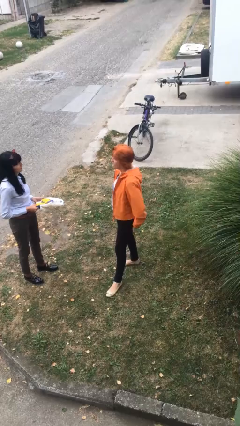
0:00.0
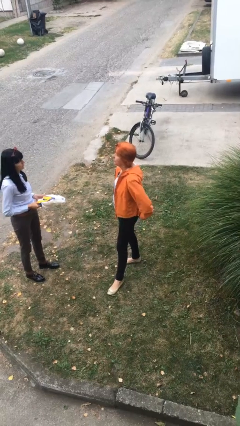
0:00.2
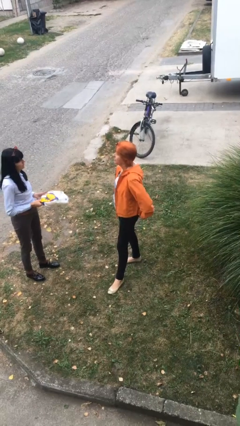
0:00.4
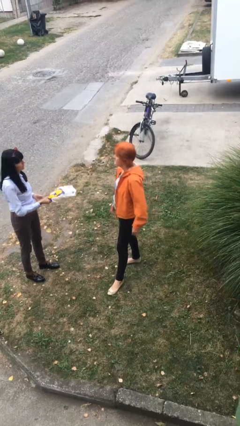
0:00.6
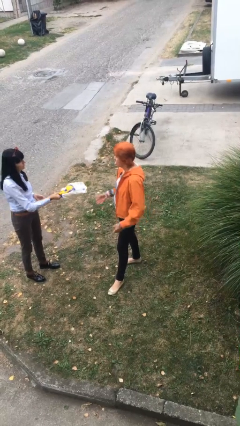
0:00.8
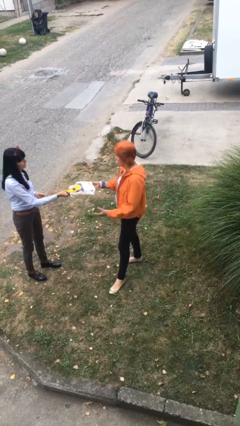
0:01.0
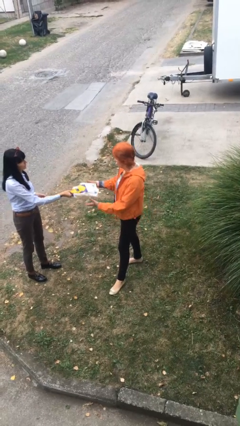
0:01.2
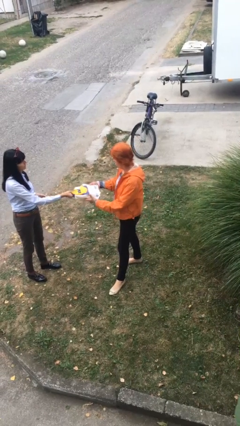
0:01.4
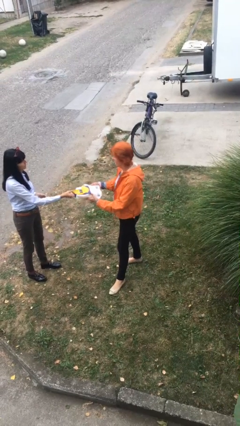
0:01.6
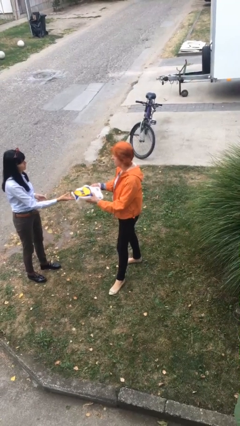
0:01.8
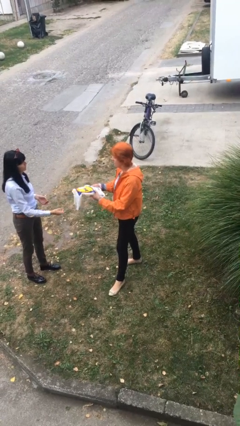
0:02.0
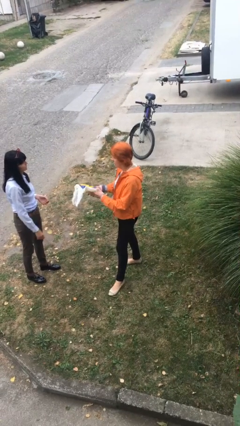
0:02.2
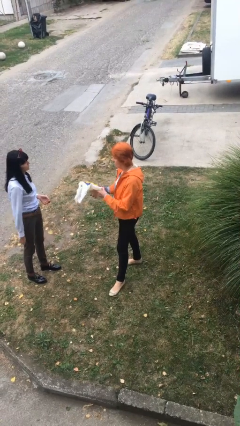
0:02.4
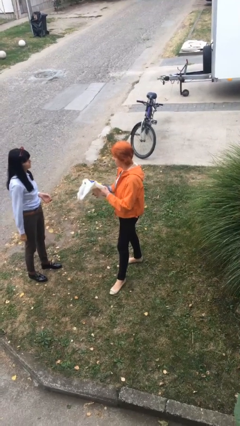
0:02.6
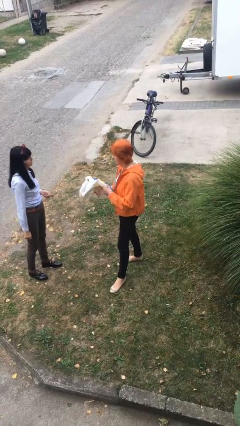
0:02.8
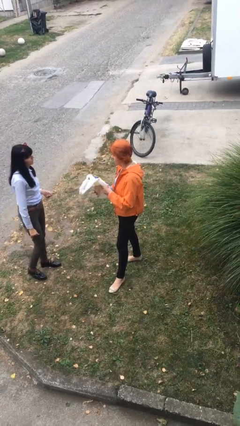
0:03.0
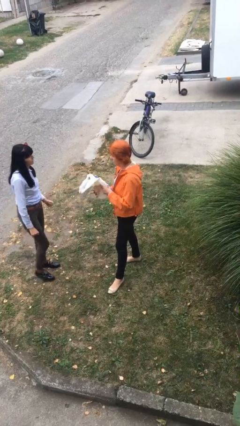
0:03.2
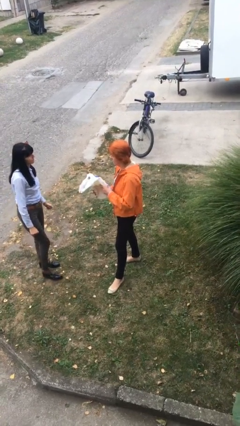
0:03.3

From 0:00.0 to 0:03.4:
person transfers object to person

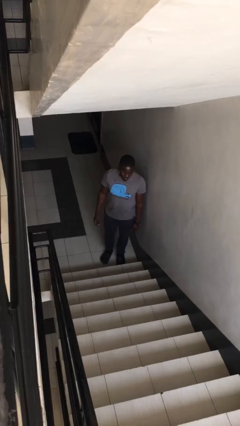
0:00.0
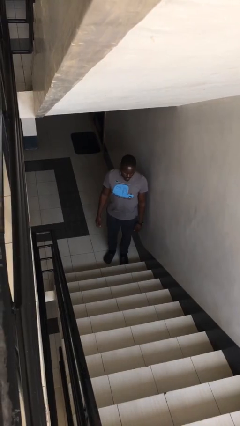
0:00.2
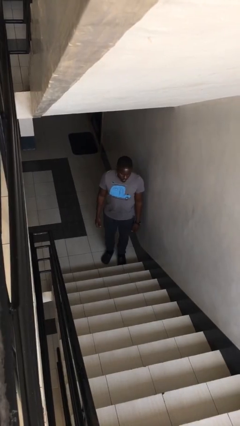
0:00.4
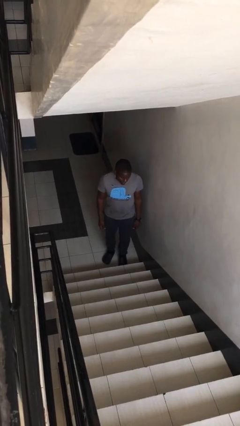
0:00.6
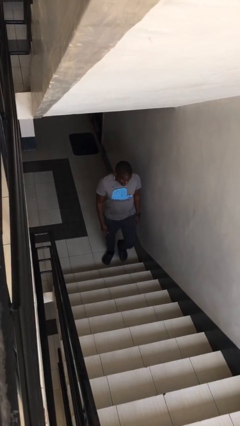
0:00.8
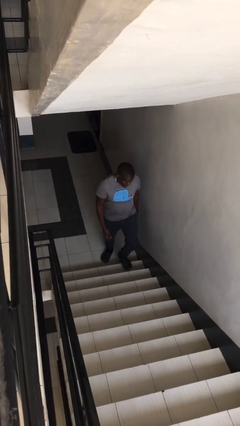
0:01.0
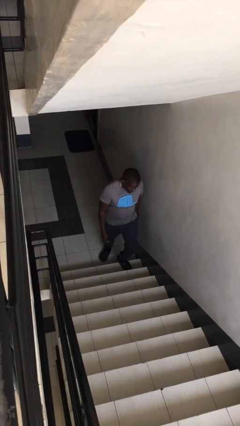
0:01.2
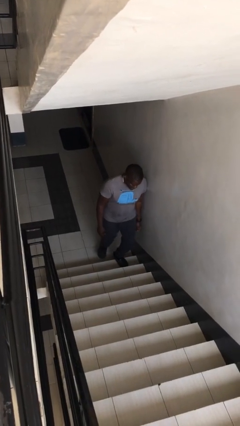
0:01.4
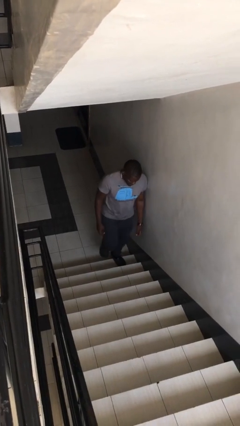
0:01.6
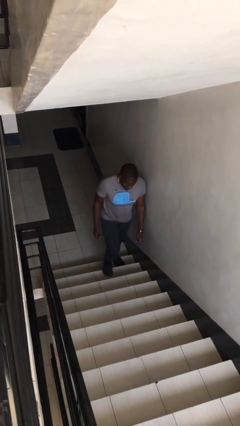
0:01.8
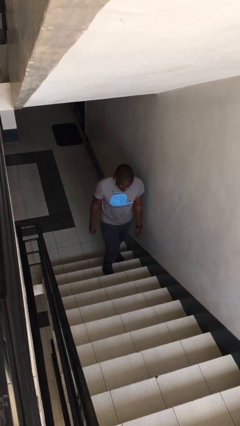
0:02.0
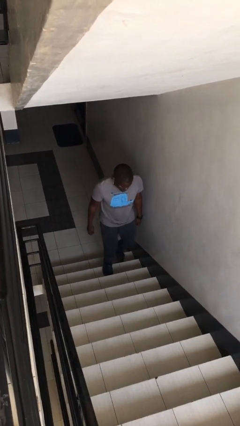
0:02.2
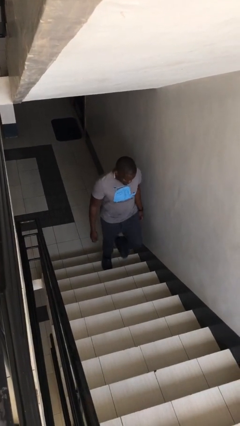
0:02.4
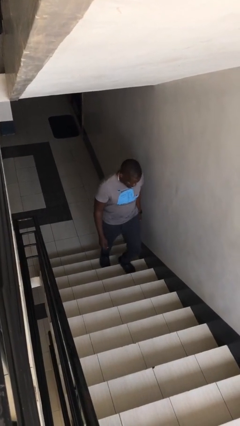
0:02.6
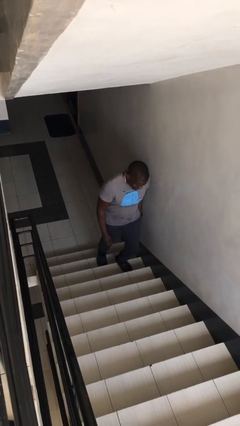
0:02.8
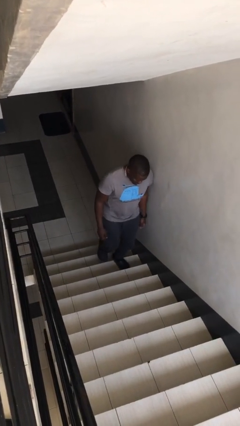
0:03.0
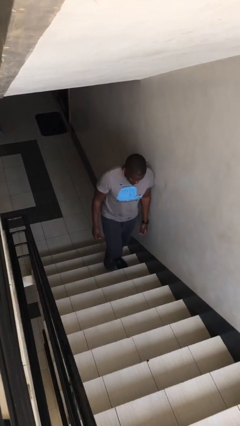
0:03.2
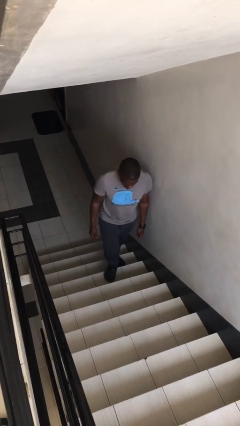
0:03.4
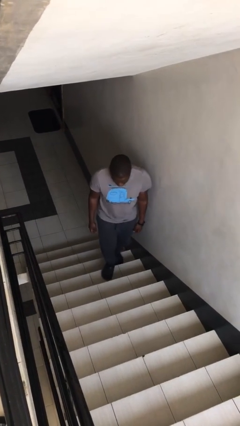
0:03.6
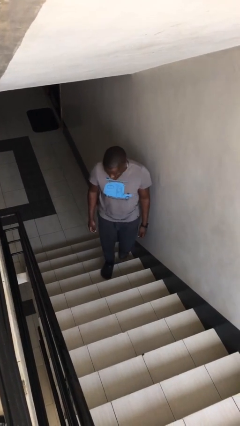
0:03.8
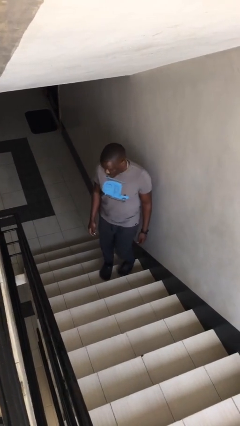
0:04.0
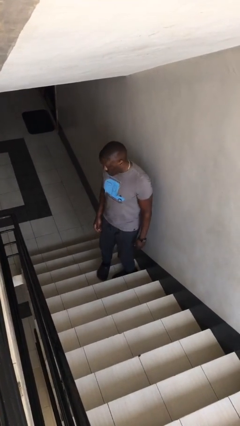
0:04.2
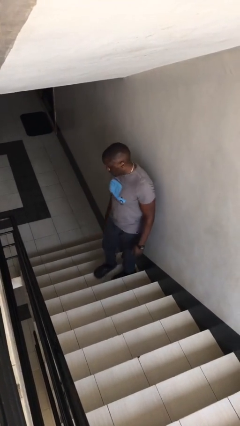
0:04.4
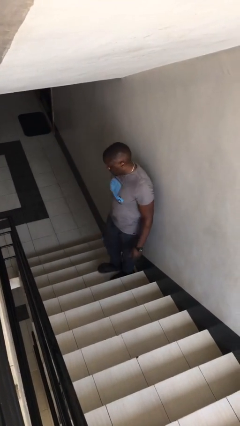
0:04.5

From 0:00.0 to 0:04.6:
person climbs up stairs

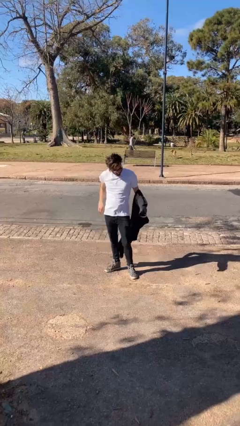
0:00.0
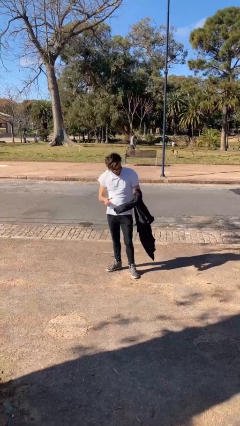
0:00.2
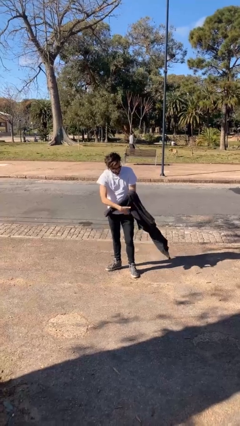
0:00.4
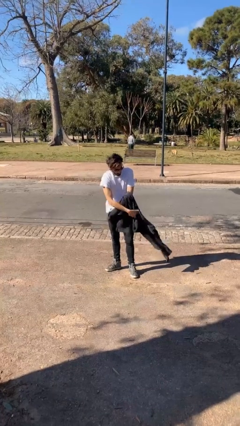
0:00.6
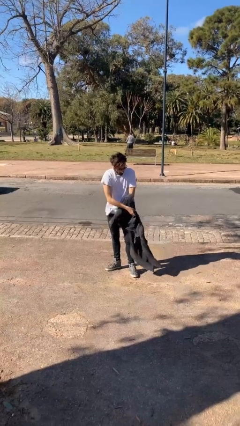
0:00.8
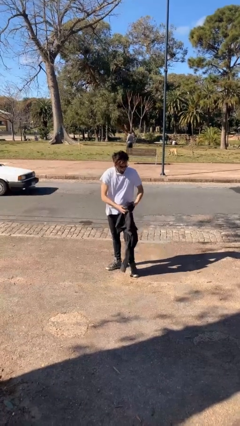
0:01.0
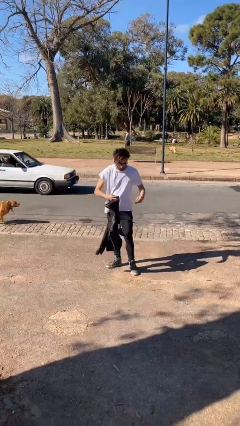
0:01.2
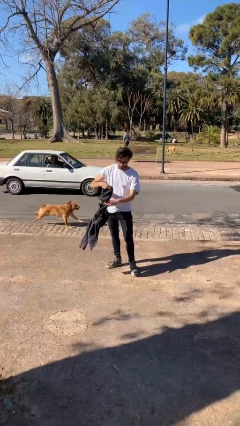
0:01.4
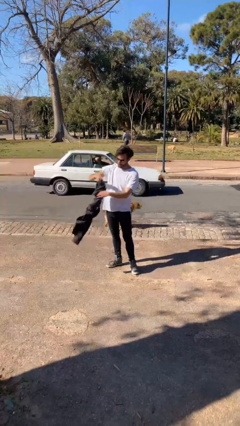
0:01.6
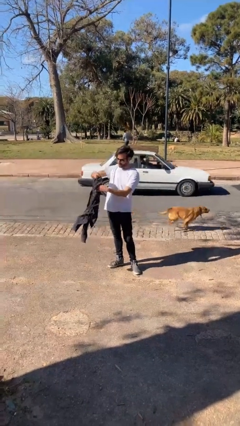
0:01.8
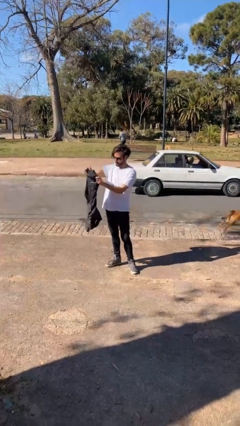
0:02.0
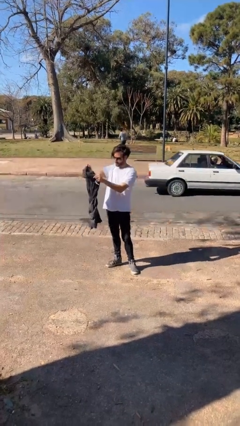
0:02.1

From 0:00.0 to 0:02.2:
person takes off jacket

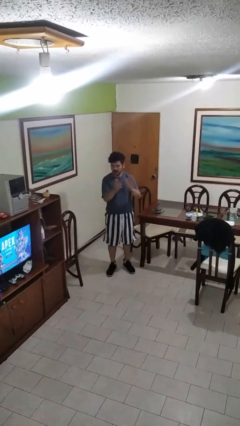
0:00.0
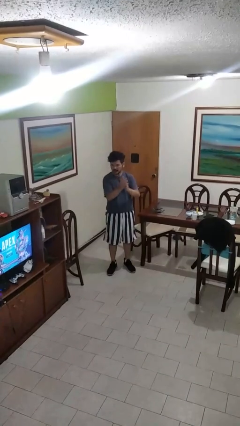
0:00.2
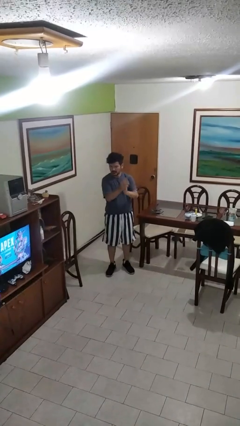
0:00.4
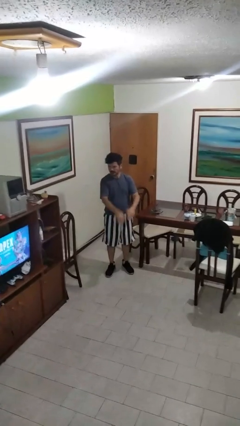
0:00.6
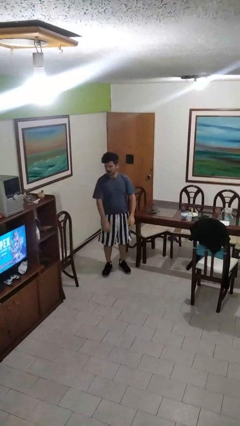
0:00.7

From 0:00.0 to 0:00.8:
person claps hands

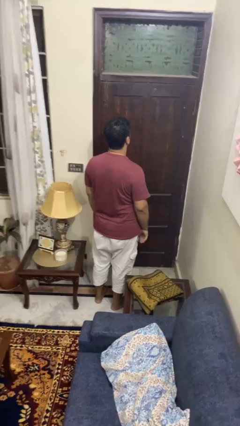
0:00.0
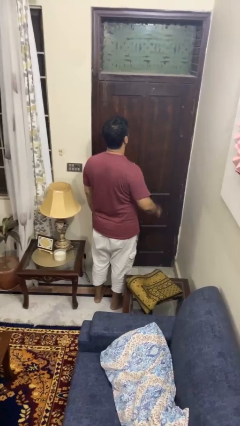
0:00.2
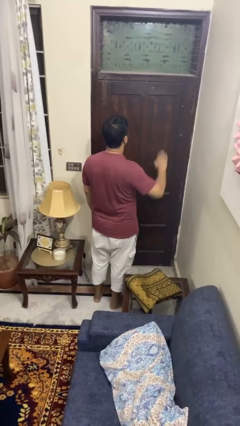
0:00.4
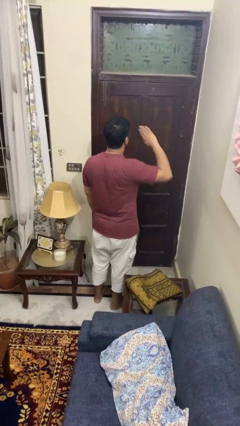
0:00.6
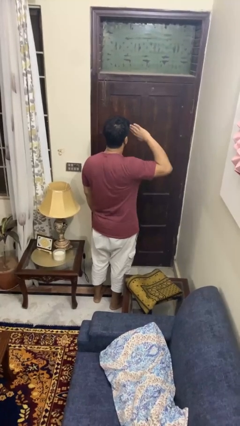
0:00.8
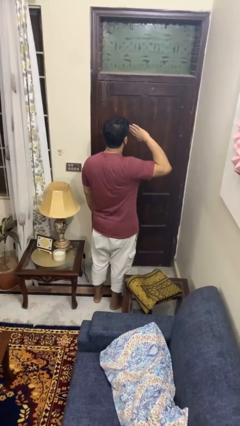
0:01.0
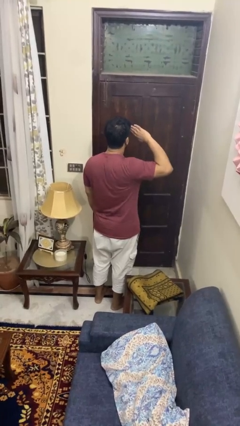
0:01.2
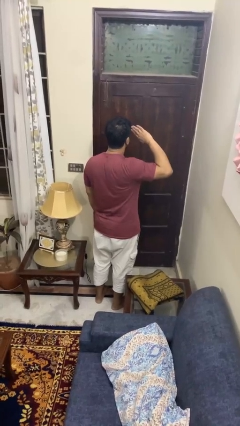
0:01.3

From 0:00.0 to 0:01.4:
person salutes

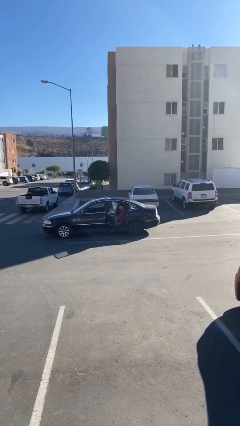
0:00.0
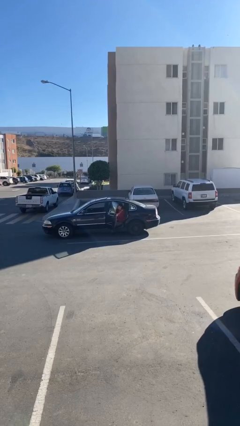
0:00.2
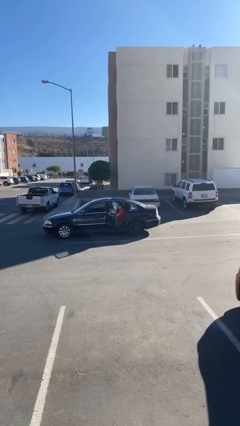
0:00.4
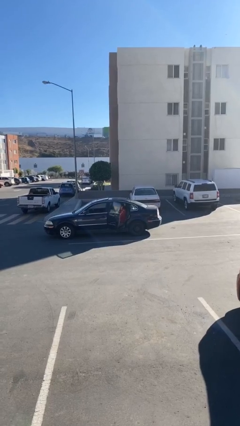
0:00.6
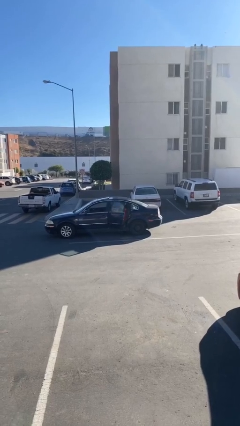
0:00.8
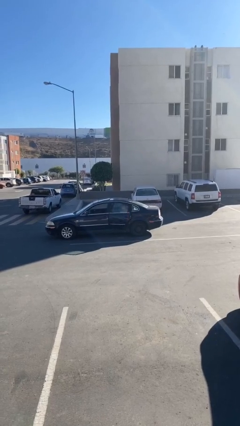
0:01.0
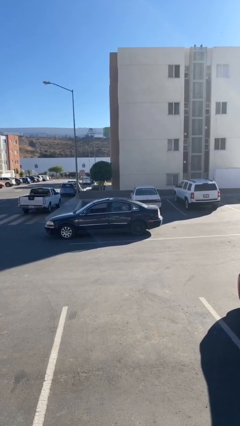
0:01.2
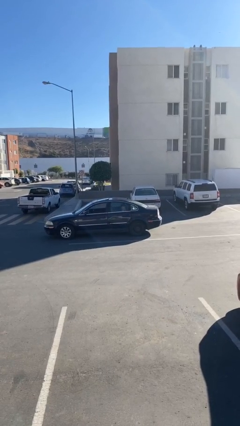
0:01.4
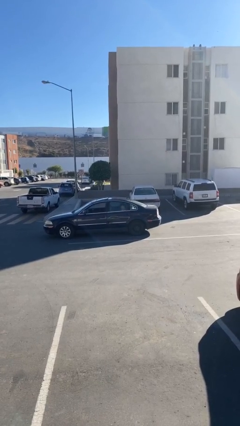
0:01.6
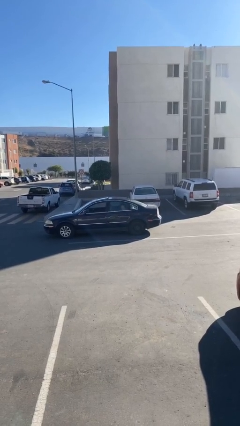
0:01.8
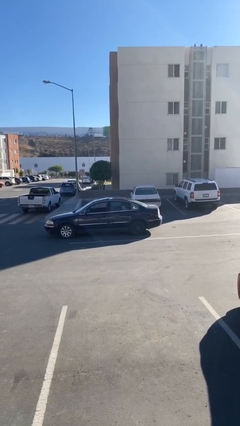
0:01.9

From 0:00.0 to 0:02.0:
person closes car door

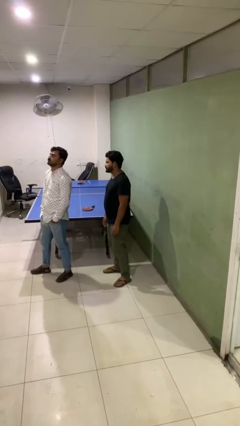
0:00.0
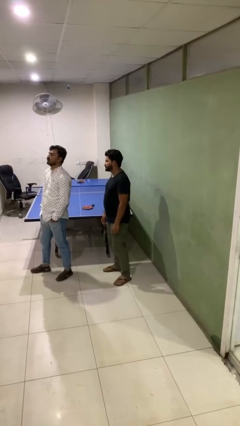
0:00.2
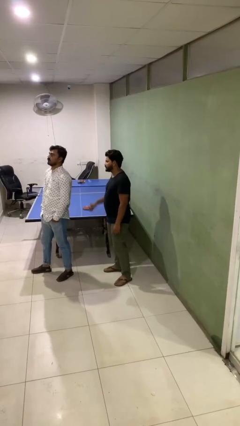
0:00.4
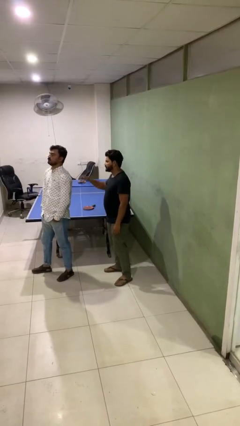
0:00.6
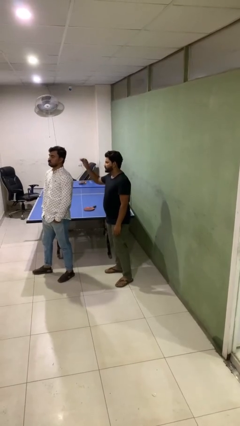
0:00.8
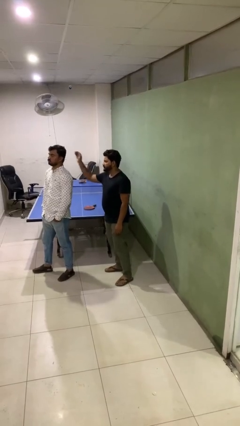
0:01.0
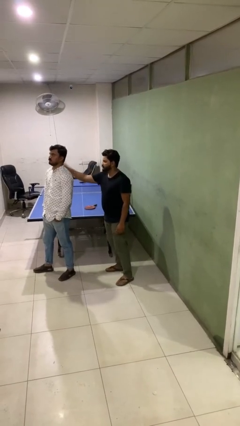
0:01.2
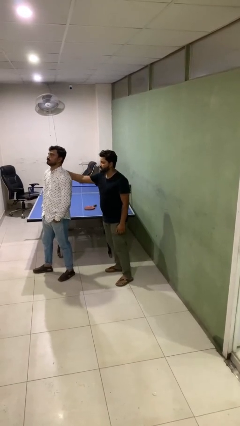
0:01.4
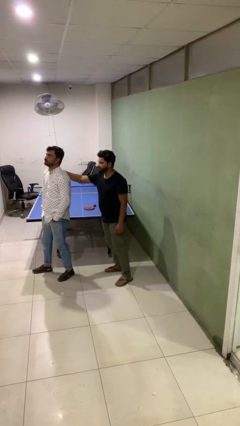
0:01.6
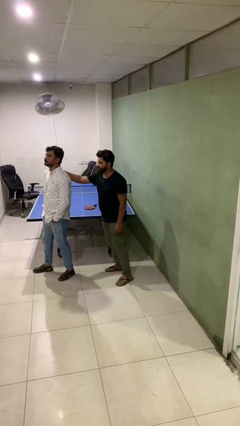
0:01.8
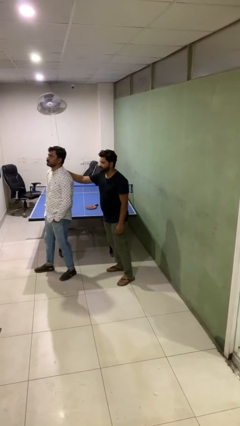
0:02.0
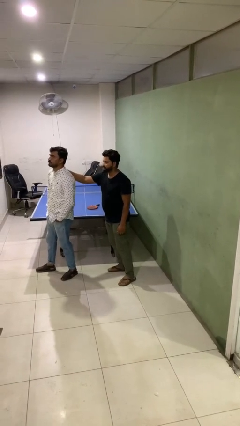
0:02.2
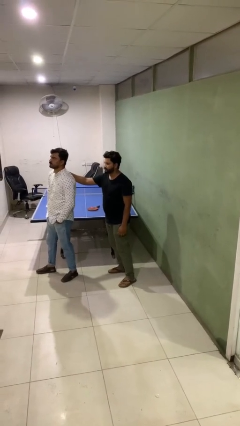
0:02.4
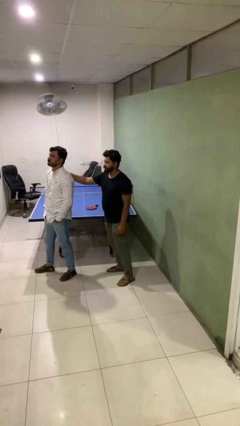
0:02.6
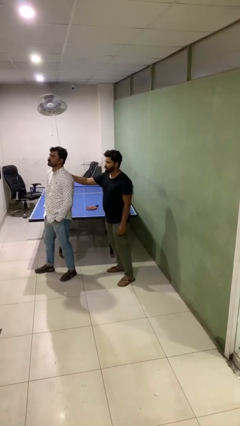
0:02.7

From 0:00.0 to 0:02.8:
person touches back of person

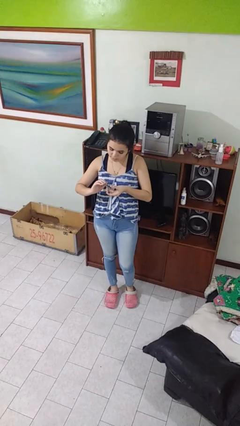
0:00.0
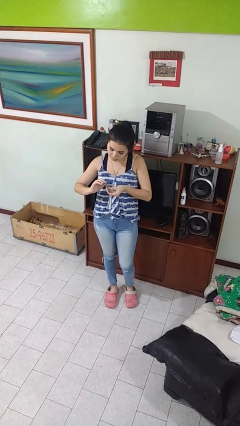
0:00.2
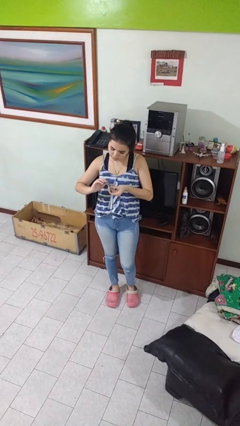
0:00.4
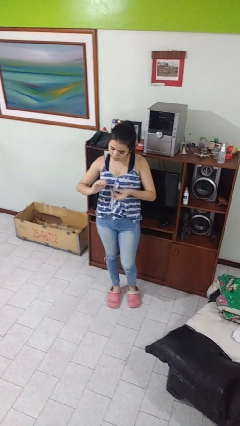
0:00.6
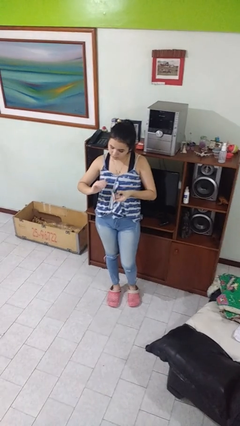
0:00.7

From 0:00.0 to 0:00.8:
person clips fingernails
